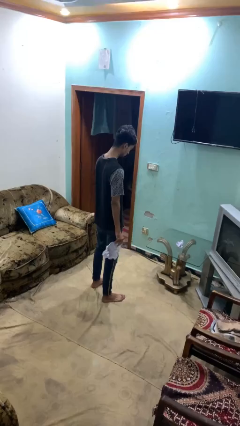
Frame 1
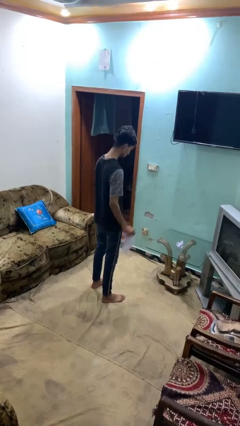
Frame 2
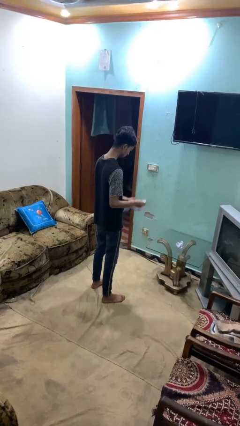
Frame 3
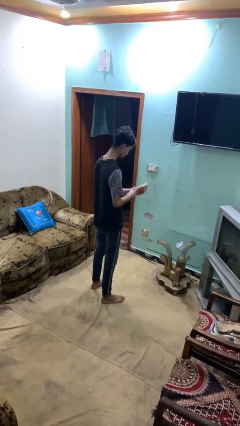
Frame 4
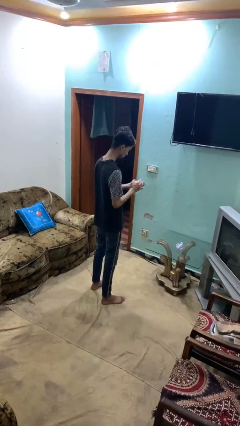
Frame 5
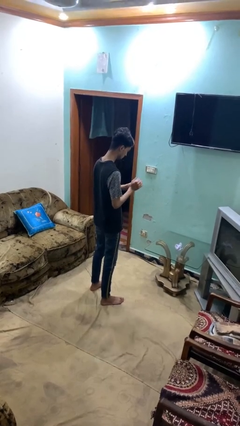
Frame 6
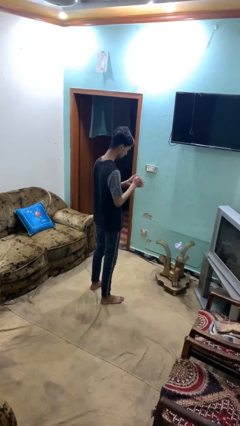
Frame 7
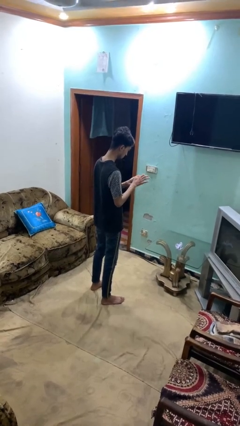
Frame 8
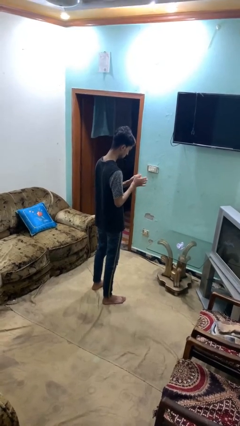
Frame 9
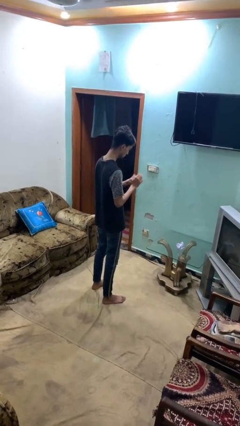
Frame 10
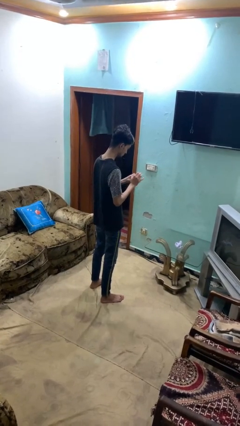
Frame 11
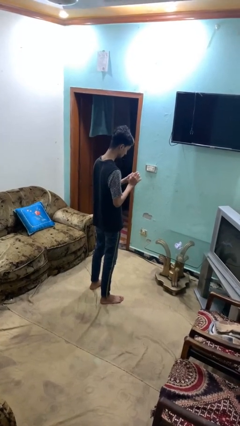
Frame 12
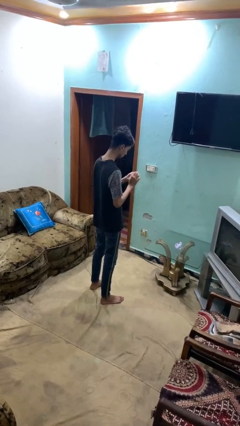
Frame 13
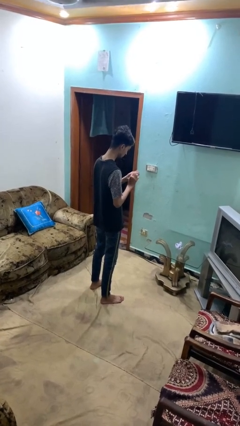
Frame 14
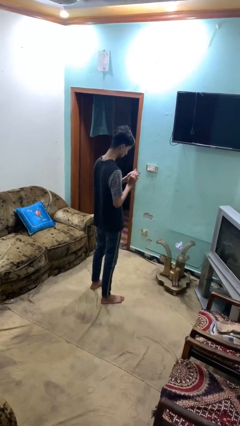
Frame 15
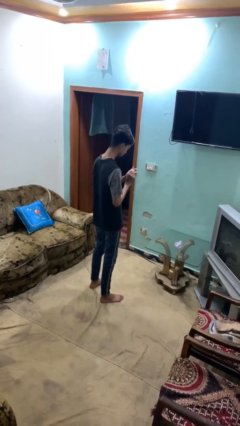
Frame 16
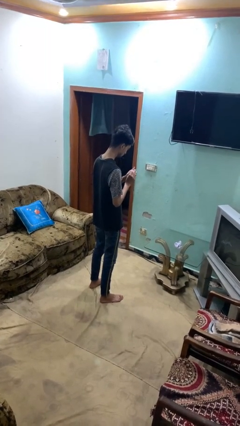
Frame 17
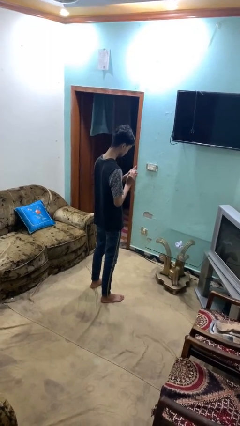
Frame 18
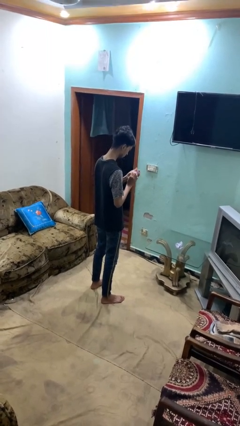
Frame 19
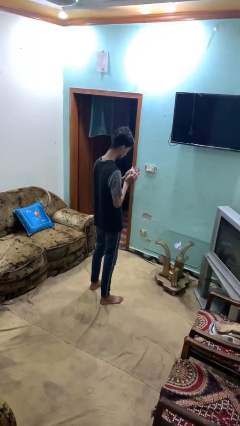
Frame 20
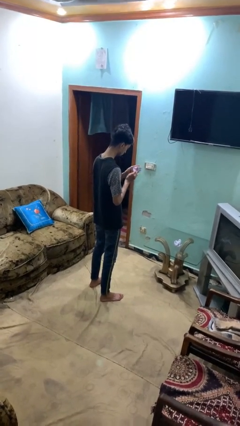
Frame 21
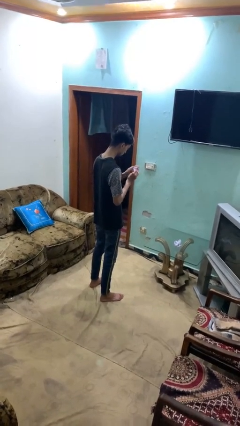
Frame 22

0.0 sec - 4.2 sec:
person crumples paper

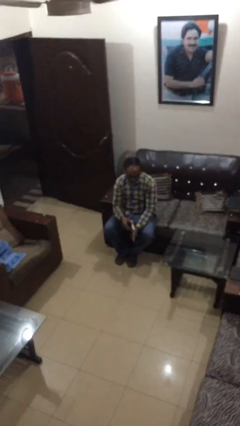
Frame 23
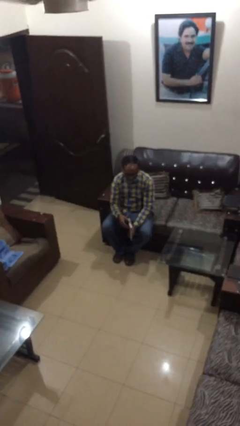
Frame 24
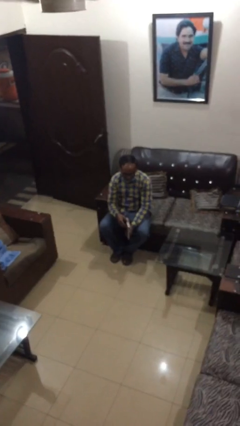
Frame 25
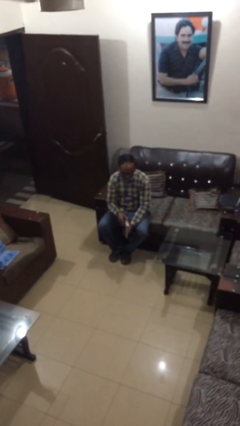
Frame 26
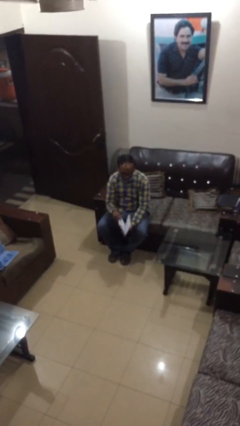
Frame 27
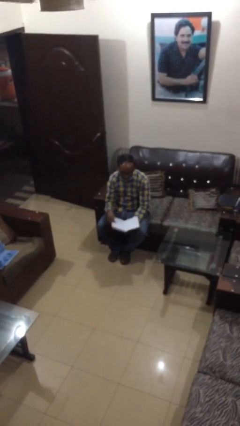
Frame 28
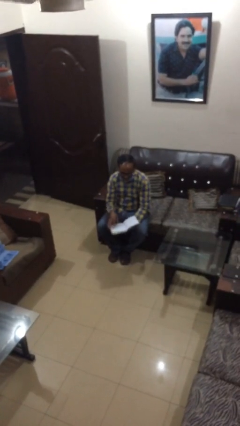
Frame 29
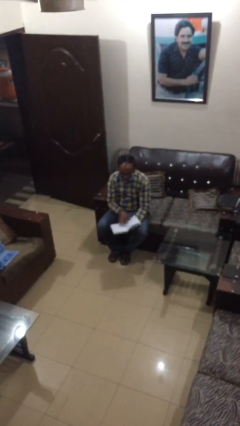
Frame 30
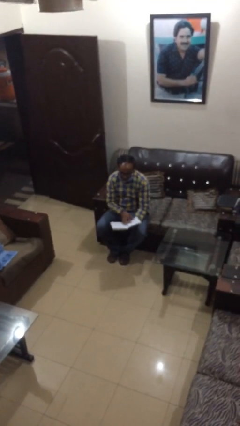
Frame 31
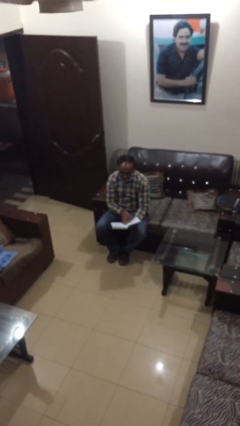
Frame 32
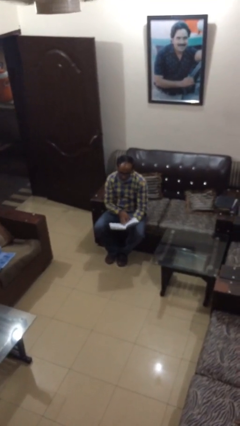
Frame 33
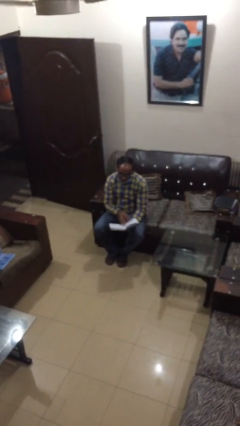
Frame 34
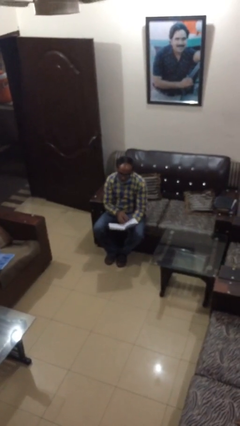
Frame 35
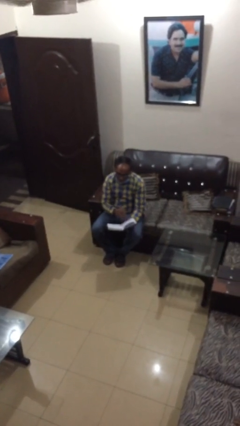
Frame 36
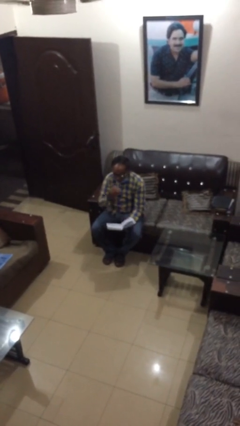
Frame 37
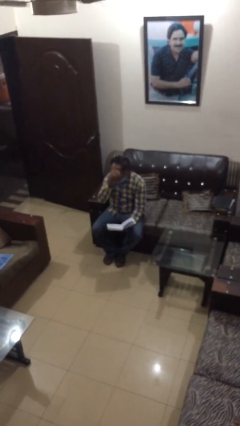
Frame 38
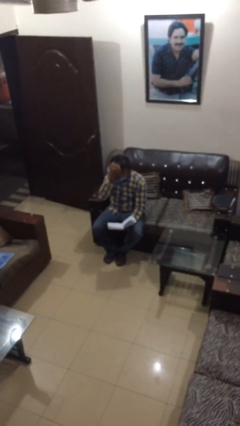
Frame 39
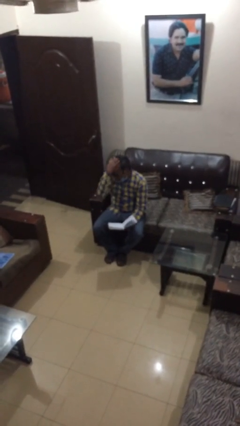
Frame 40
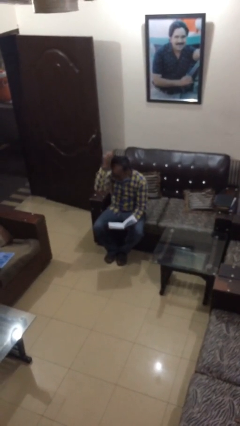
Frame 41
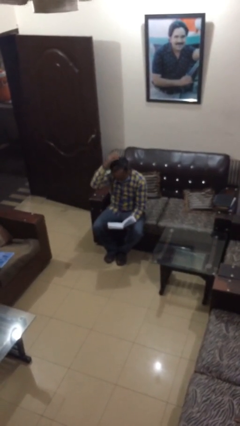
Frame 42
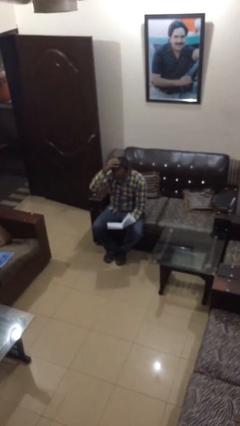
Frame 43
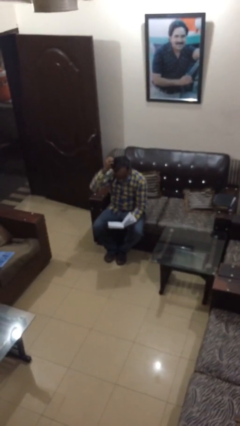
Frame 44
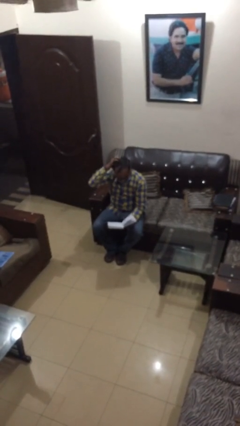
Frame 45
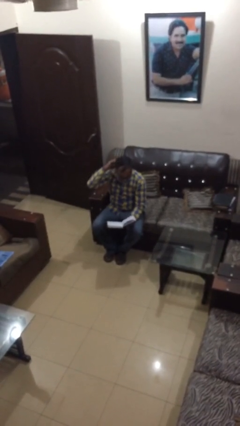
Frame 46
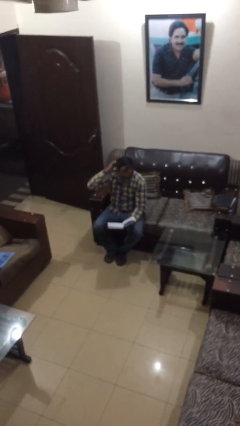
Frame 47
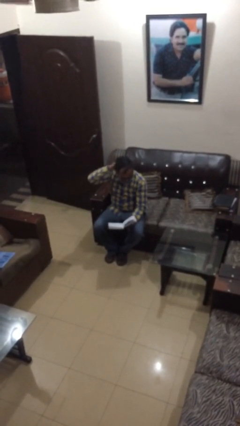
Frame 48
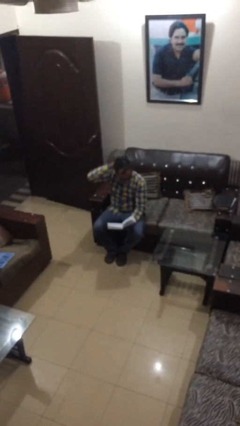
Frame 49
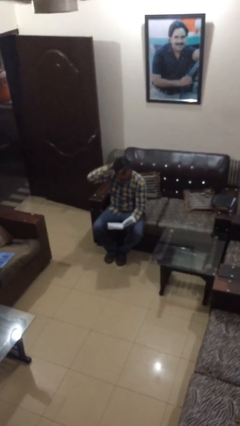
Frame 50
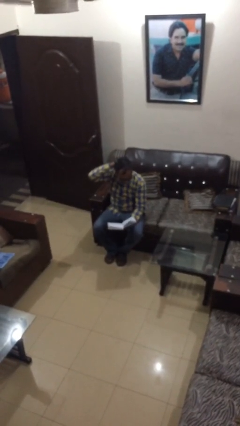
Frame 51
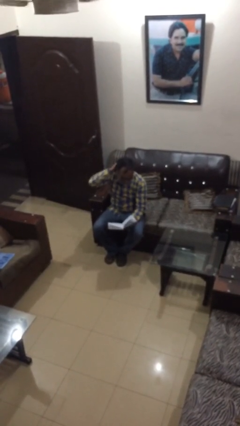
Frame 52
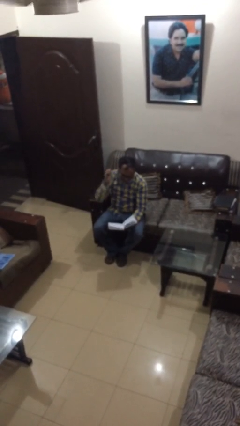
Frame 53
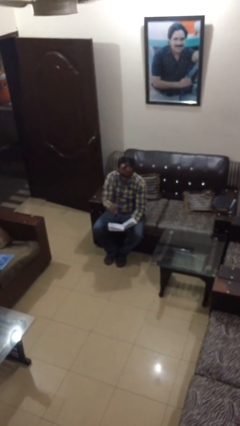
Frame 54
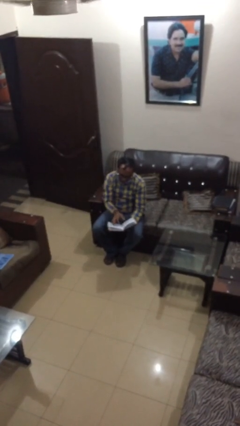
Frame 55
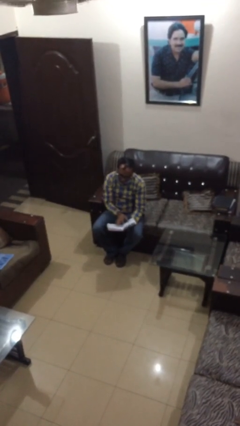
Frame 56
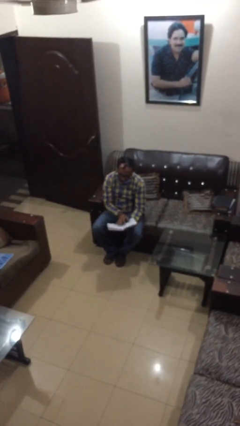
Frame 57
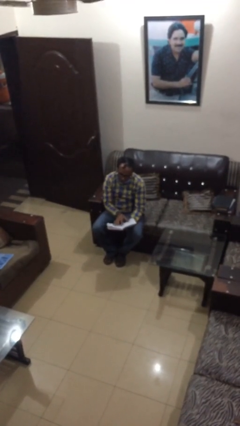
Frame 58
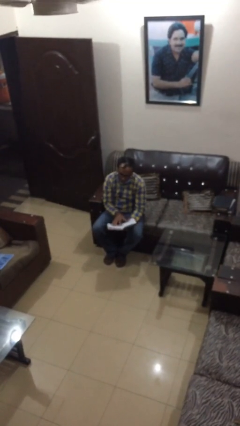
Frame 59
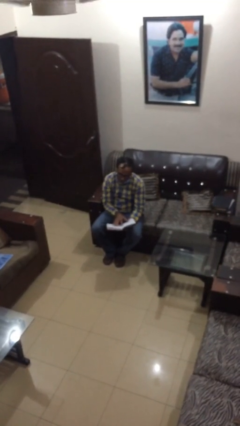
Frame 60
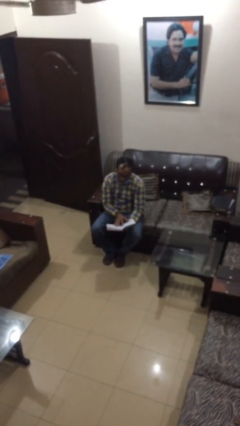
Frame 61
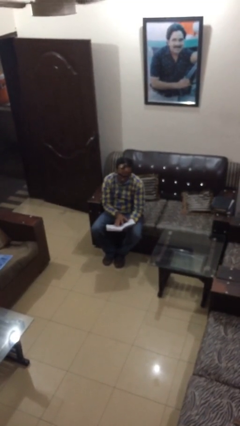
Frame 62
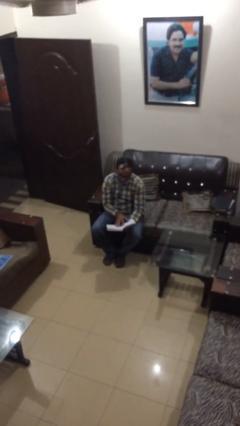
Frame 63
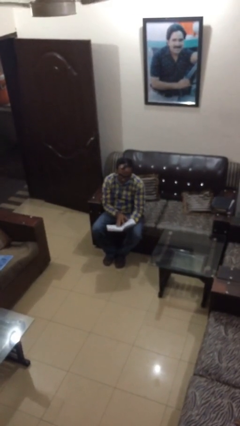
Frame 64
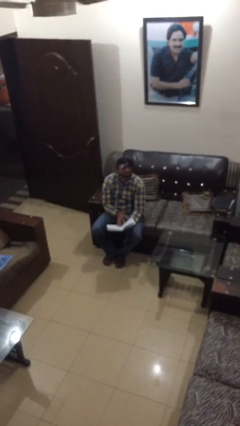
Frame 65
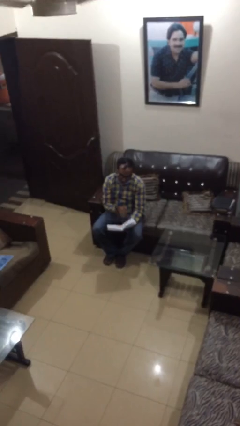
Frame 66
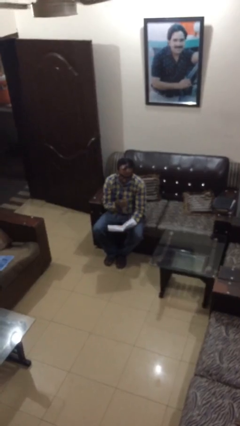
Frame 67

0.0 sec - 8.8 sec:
person reads document

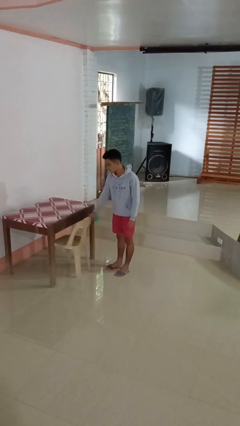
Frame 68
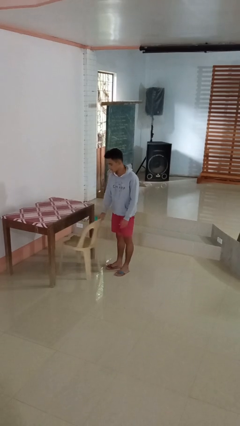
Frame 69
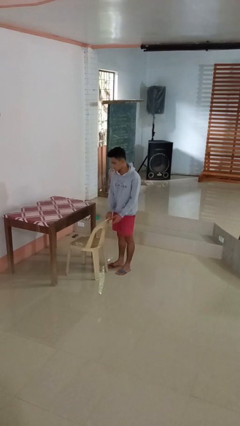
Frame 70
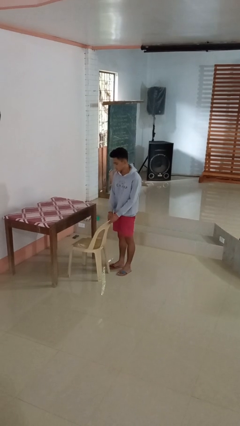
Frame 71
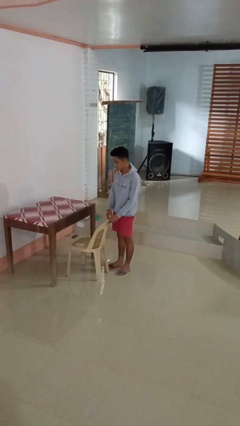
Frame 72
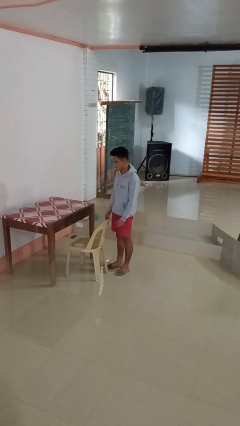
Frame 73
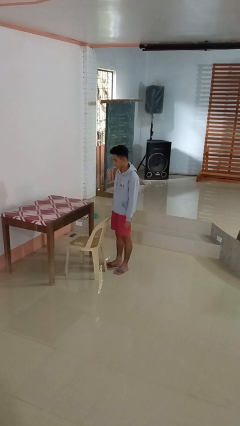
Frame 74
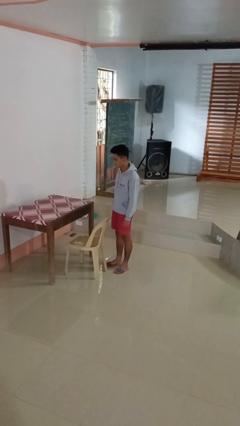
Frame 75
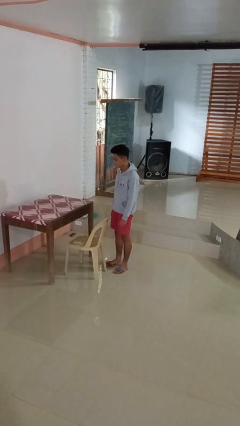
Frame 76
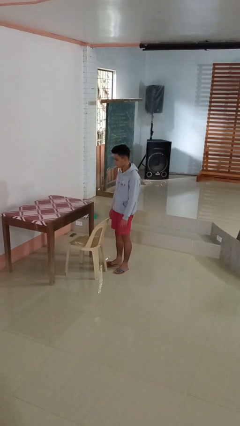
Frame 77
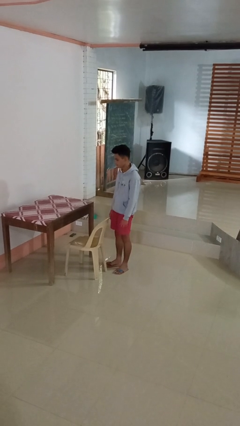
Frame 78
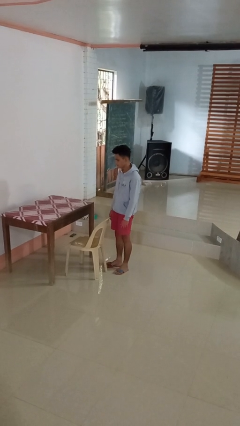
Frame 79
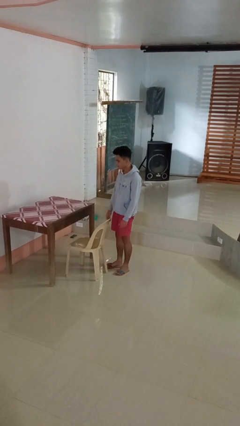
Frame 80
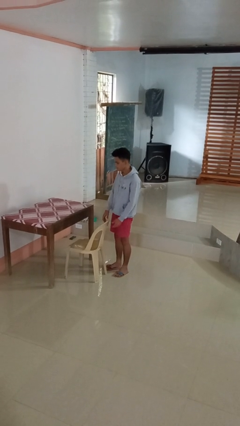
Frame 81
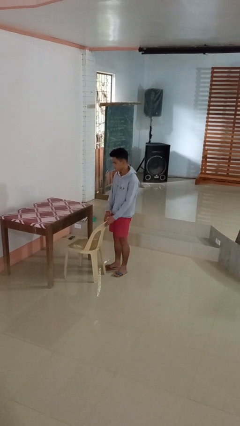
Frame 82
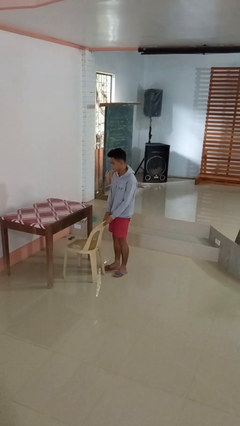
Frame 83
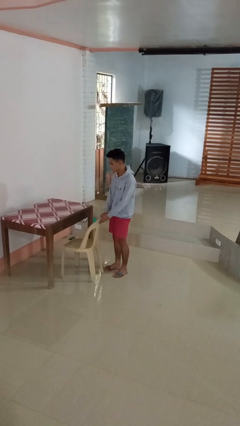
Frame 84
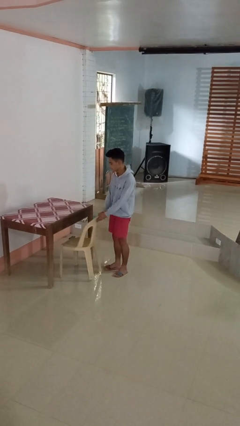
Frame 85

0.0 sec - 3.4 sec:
person pulls out chair

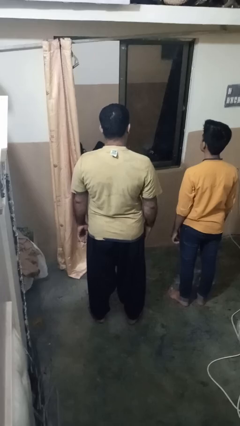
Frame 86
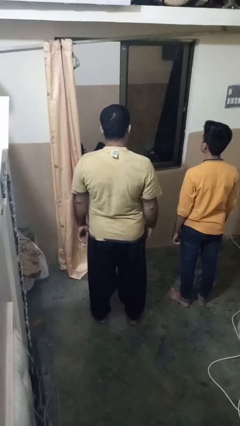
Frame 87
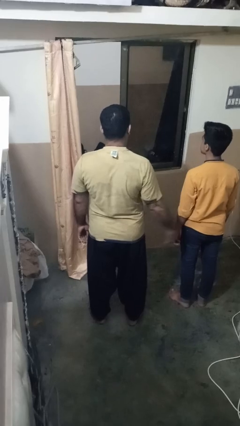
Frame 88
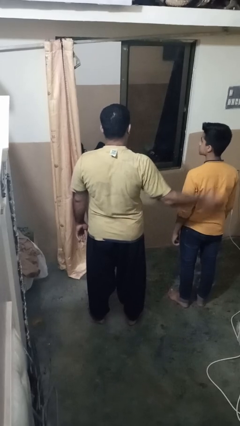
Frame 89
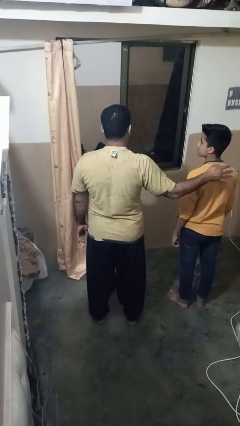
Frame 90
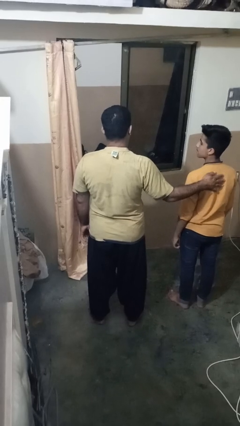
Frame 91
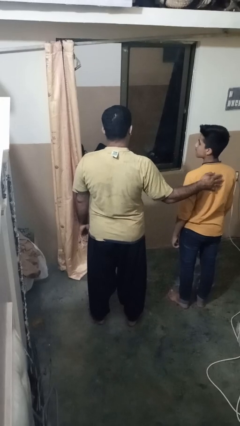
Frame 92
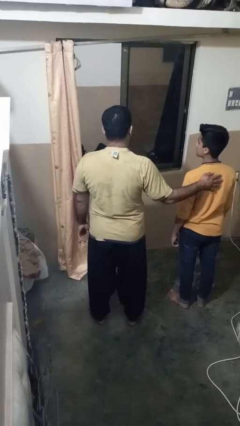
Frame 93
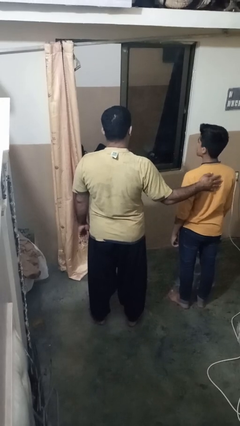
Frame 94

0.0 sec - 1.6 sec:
person touches back of person
